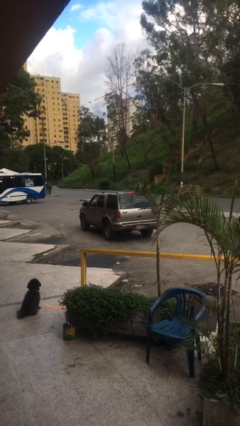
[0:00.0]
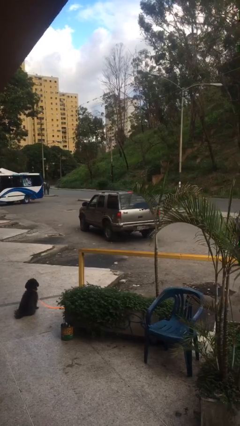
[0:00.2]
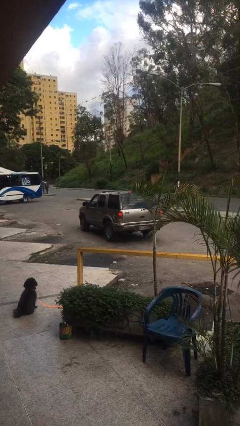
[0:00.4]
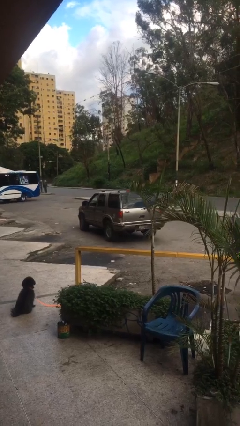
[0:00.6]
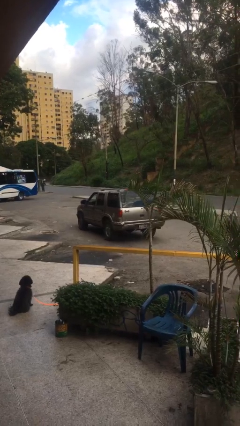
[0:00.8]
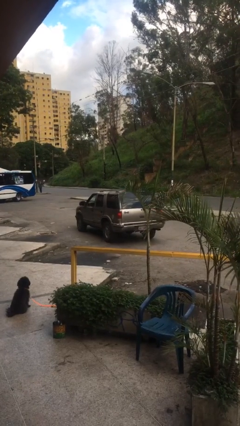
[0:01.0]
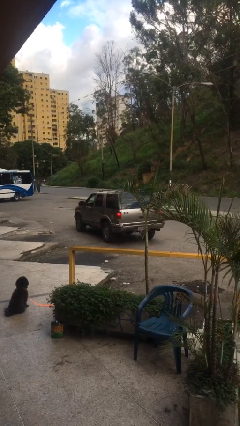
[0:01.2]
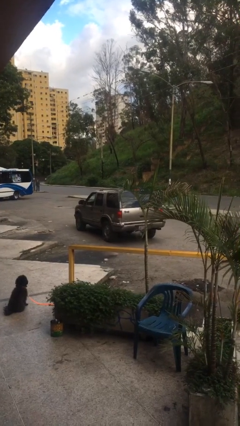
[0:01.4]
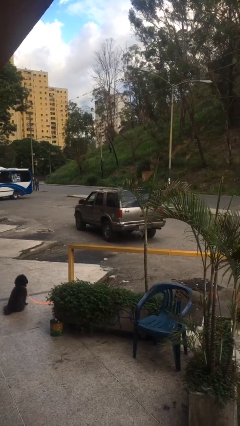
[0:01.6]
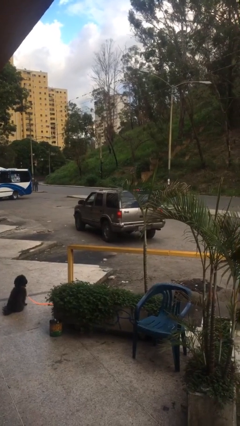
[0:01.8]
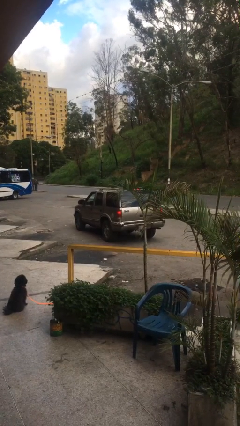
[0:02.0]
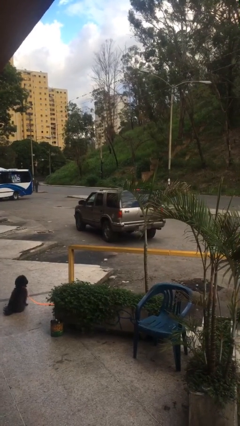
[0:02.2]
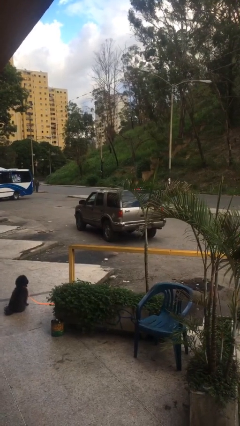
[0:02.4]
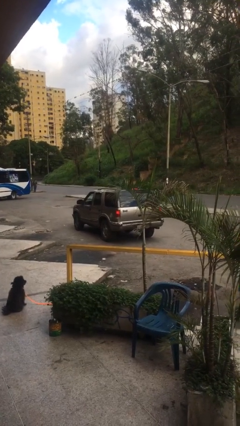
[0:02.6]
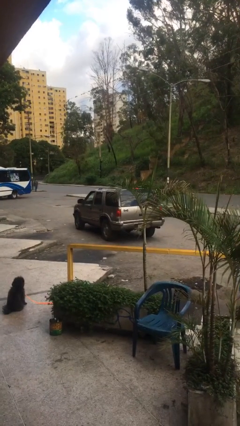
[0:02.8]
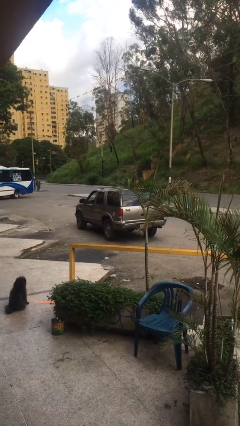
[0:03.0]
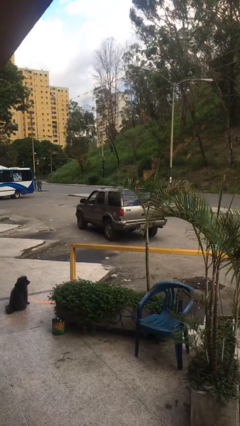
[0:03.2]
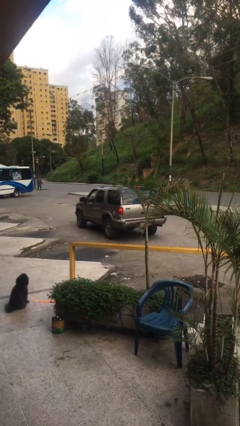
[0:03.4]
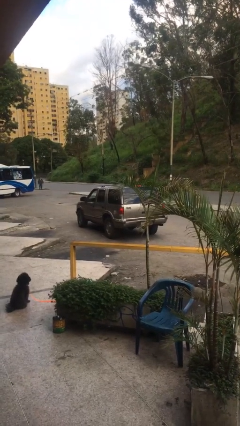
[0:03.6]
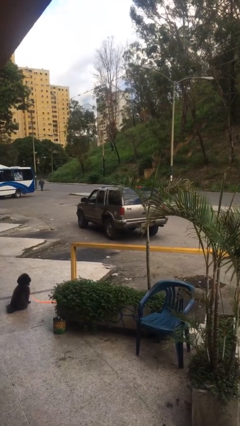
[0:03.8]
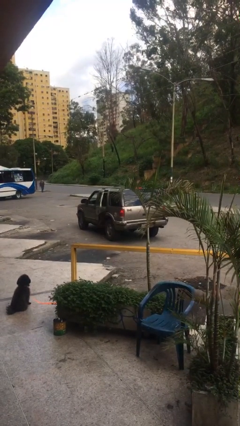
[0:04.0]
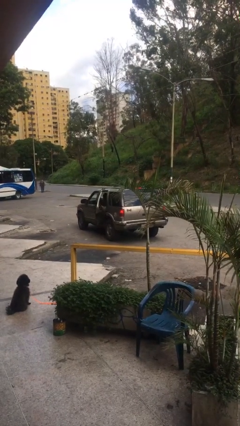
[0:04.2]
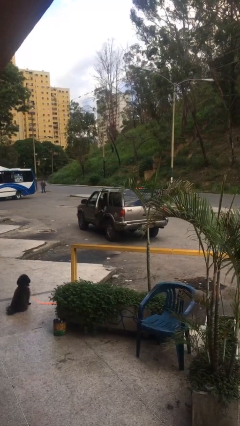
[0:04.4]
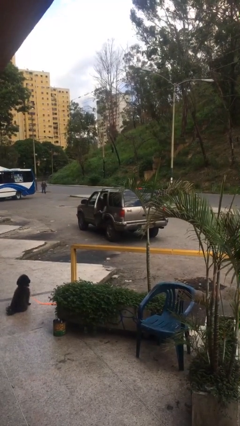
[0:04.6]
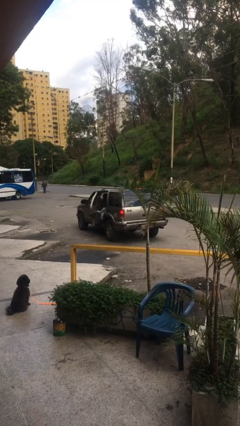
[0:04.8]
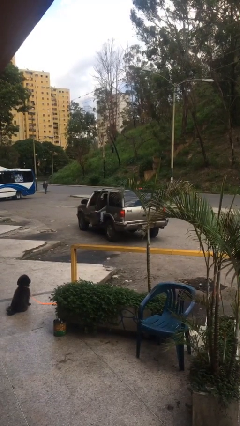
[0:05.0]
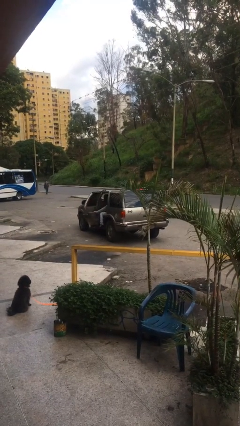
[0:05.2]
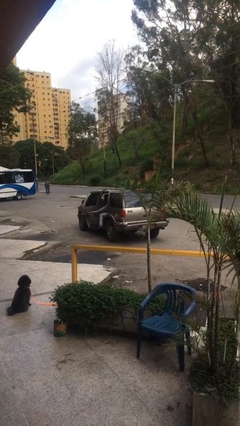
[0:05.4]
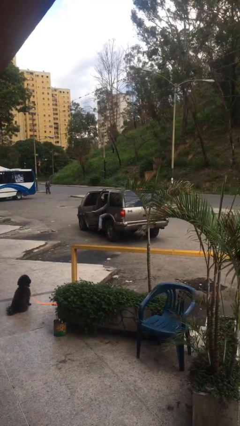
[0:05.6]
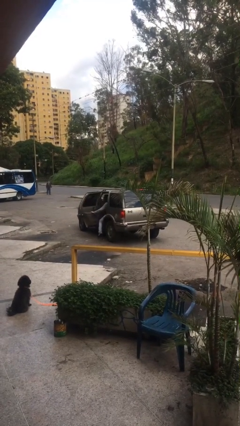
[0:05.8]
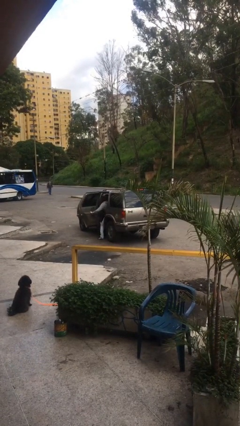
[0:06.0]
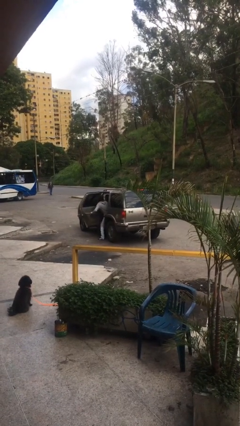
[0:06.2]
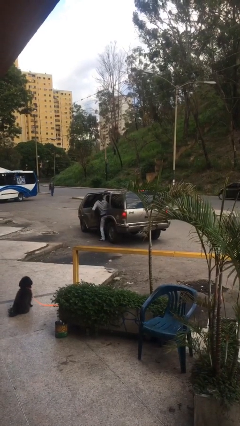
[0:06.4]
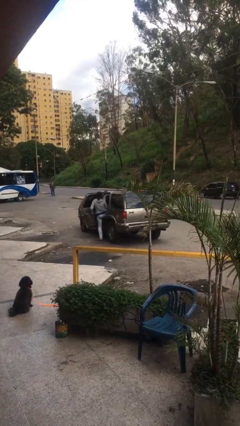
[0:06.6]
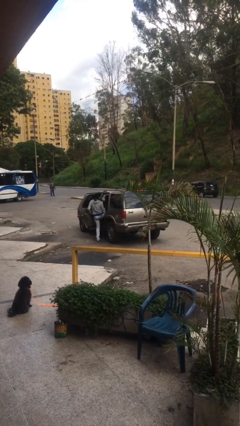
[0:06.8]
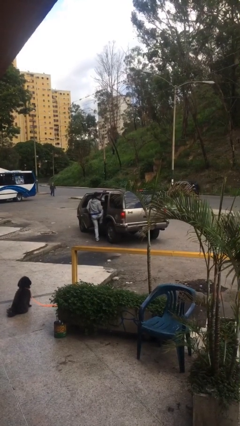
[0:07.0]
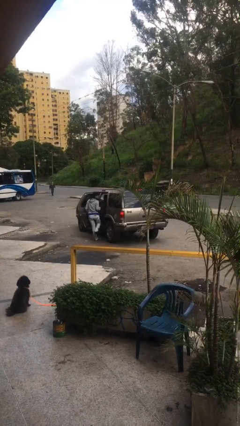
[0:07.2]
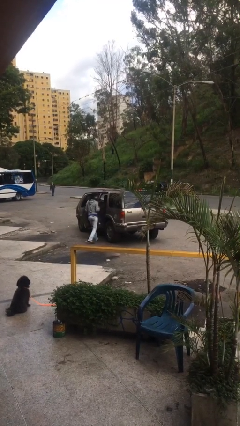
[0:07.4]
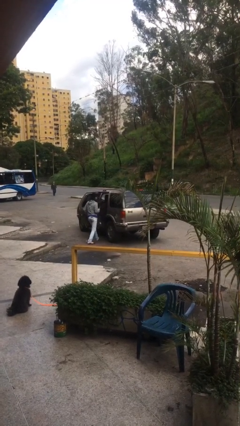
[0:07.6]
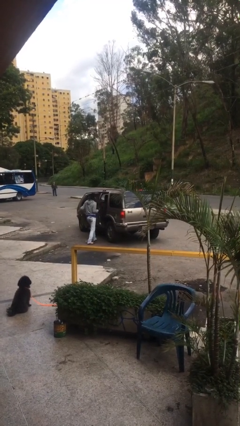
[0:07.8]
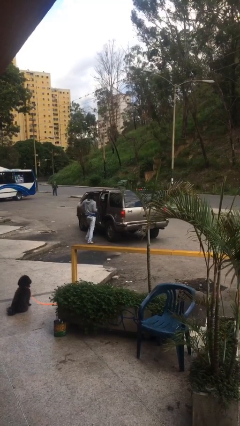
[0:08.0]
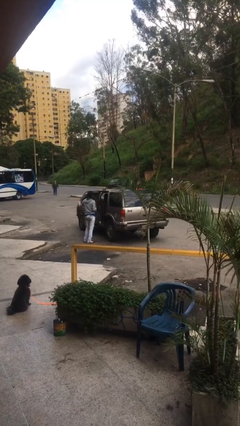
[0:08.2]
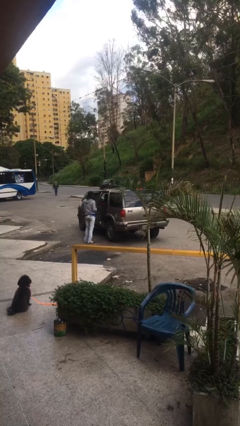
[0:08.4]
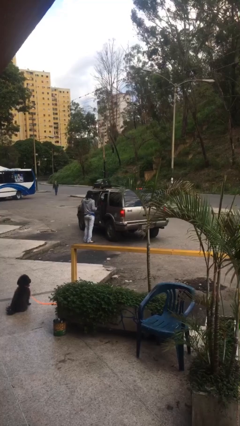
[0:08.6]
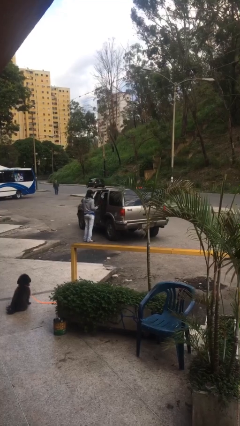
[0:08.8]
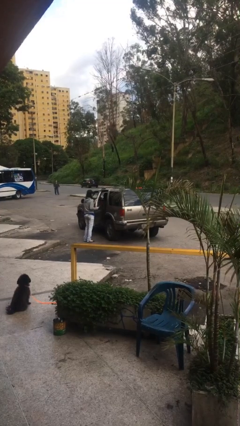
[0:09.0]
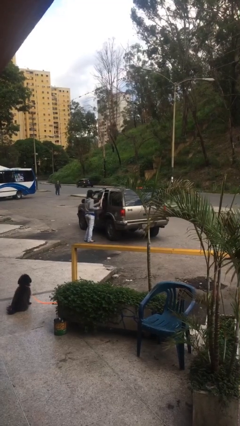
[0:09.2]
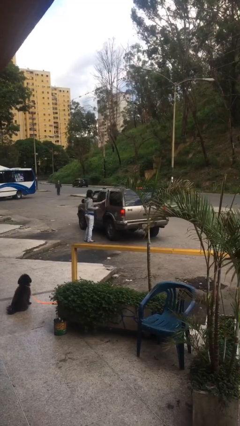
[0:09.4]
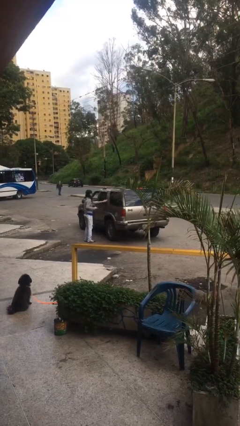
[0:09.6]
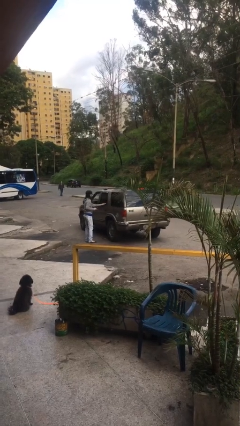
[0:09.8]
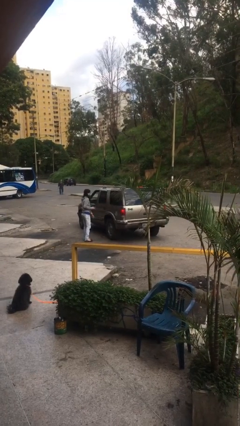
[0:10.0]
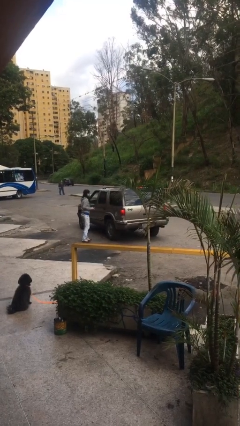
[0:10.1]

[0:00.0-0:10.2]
car drops off person

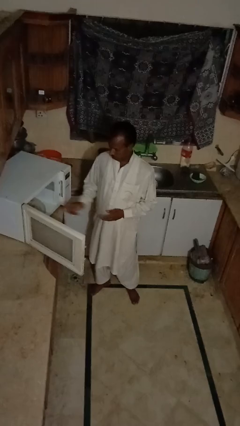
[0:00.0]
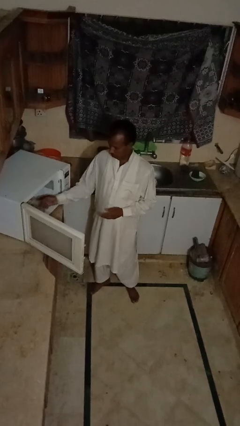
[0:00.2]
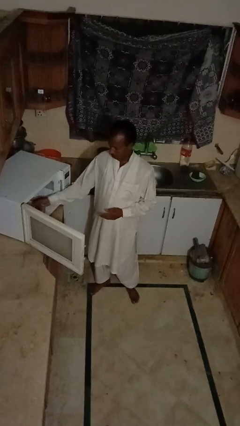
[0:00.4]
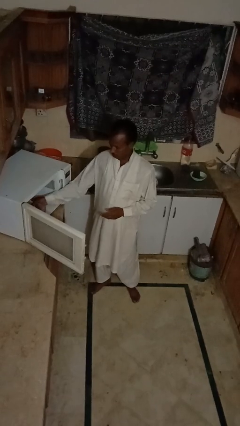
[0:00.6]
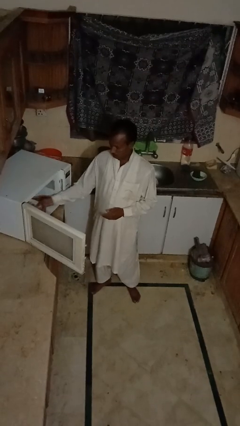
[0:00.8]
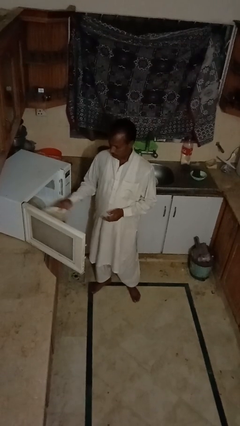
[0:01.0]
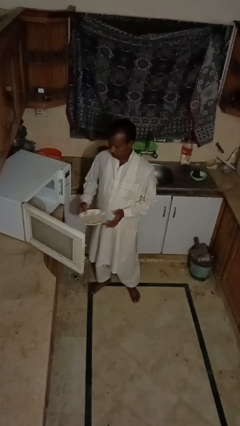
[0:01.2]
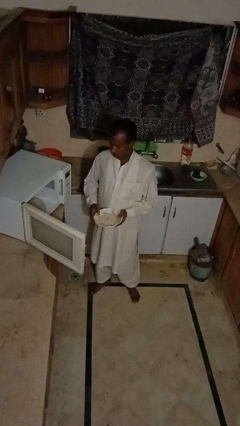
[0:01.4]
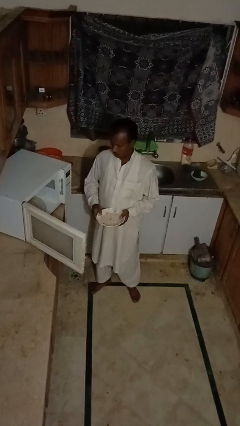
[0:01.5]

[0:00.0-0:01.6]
person takes object from microwave

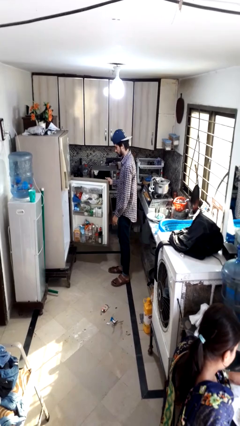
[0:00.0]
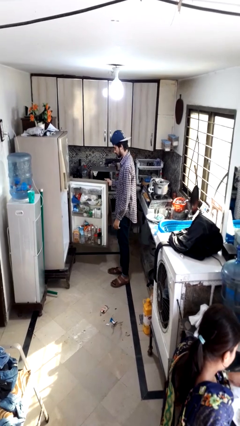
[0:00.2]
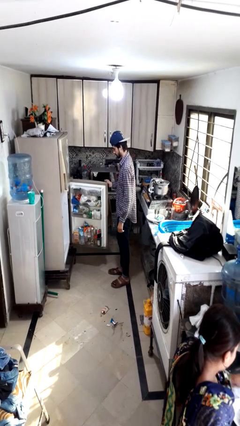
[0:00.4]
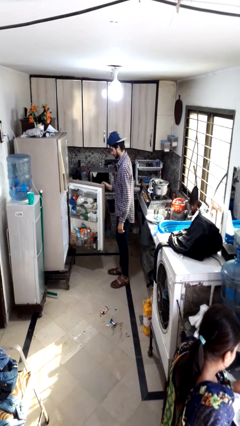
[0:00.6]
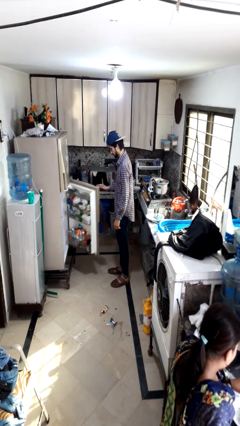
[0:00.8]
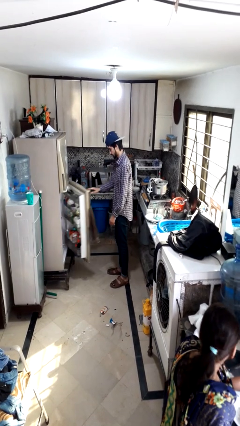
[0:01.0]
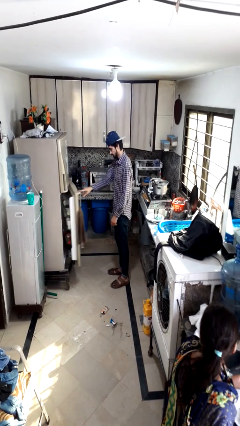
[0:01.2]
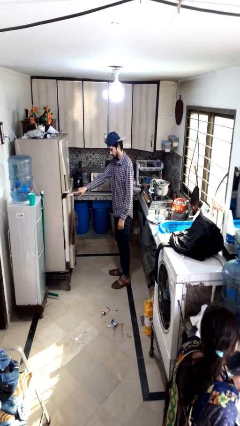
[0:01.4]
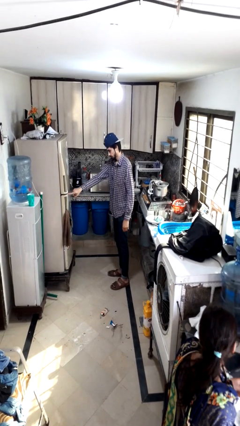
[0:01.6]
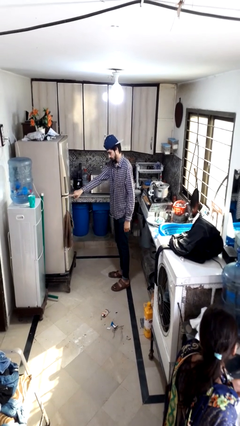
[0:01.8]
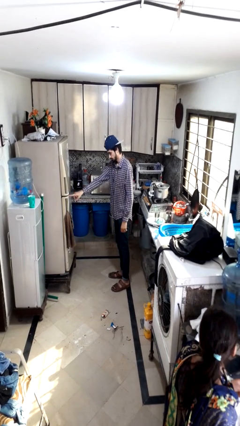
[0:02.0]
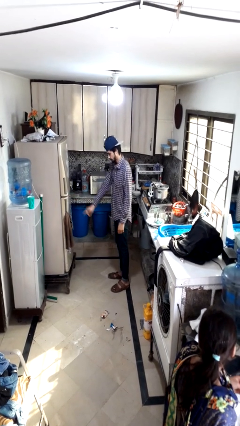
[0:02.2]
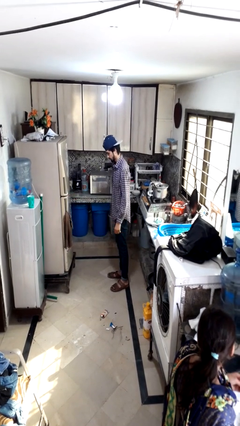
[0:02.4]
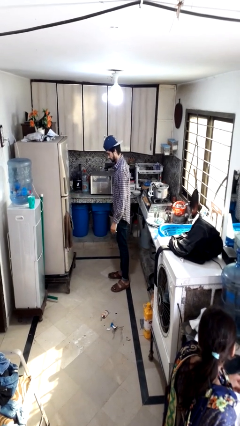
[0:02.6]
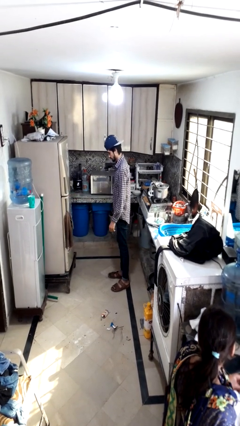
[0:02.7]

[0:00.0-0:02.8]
person closes refrigerator

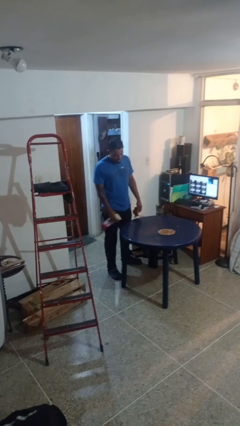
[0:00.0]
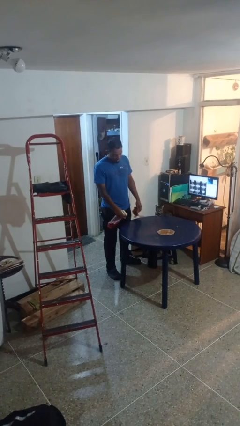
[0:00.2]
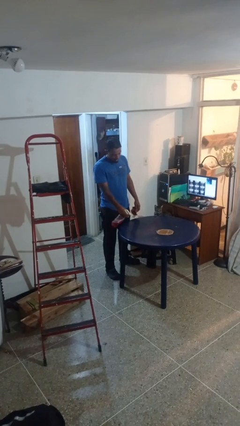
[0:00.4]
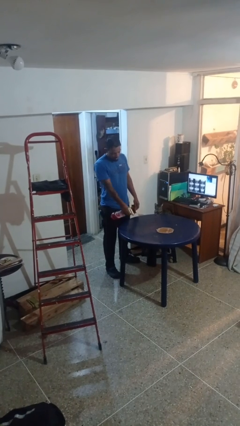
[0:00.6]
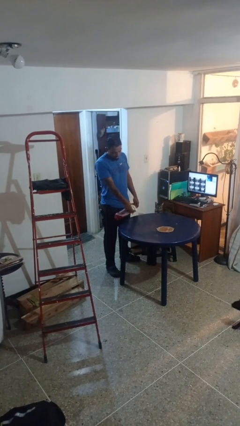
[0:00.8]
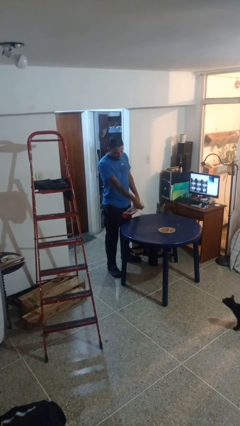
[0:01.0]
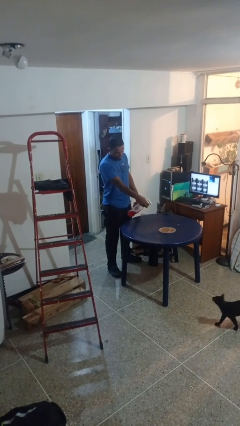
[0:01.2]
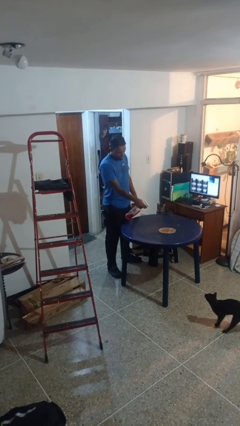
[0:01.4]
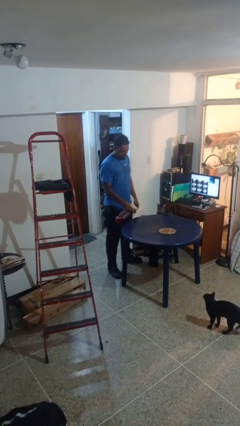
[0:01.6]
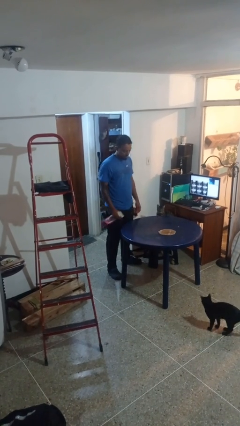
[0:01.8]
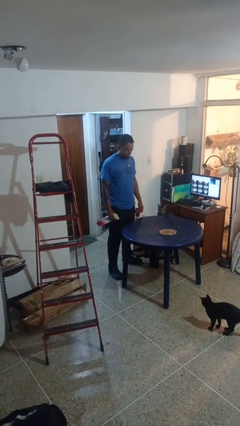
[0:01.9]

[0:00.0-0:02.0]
person sprays from bottle

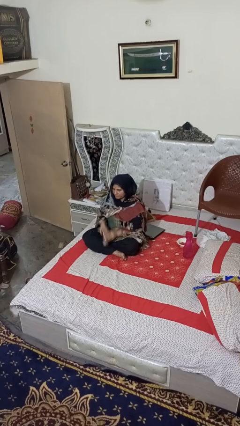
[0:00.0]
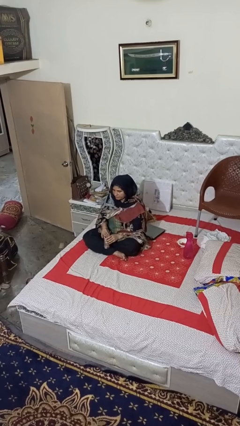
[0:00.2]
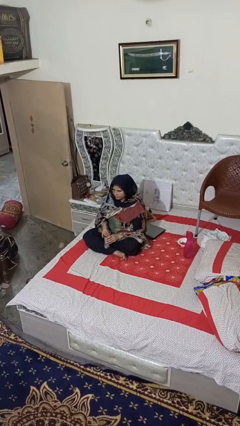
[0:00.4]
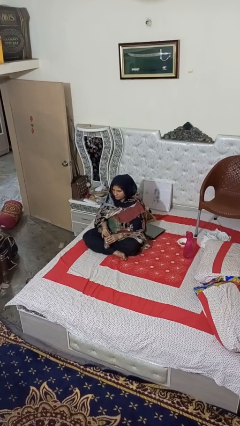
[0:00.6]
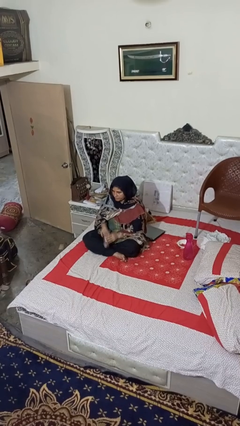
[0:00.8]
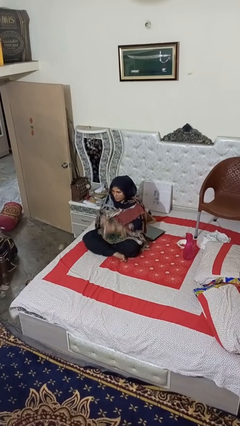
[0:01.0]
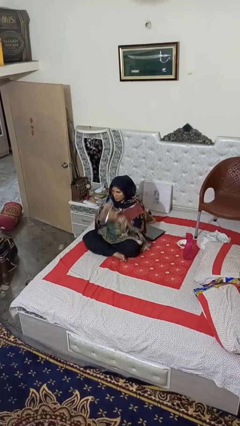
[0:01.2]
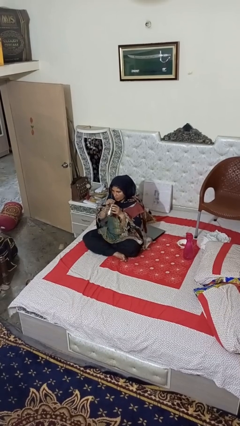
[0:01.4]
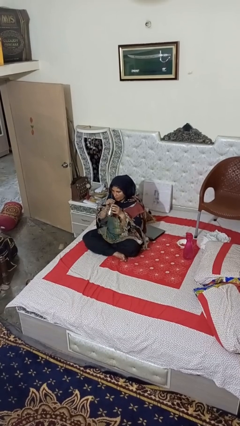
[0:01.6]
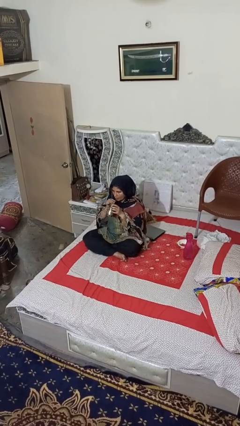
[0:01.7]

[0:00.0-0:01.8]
person drinks from straw
